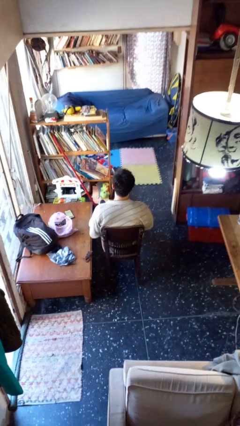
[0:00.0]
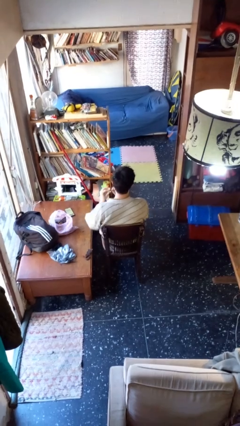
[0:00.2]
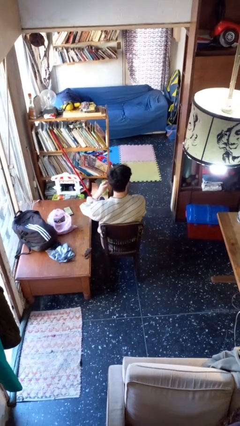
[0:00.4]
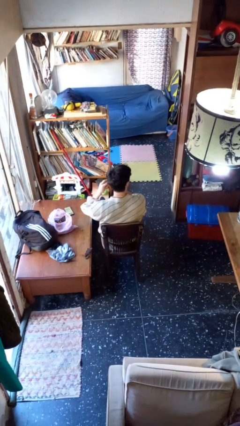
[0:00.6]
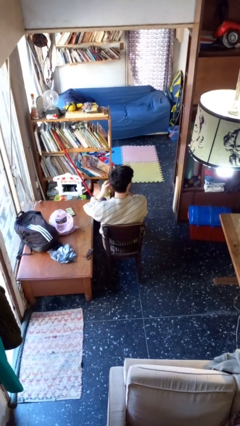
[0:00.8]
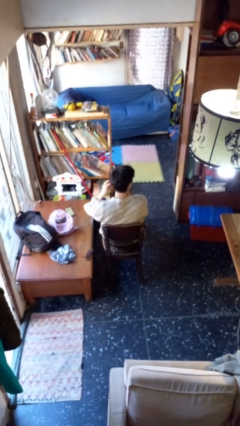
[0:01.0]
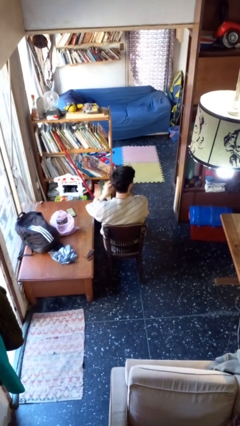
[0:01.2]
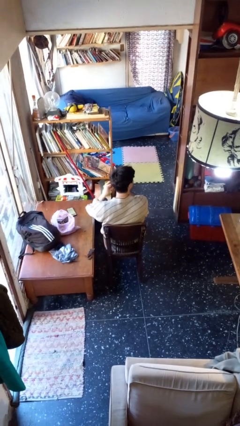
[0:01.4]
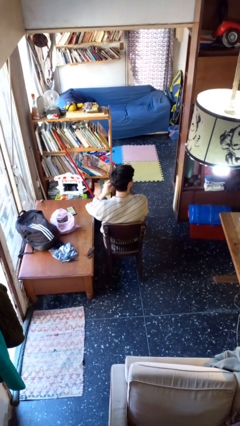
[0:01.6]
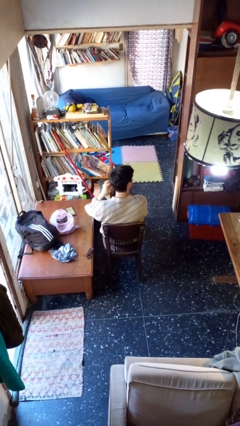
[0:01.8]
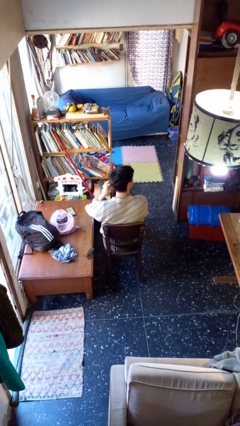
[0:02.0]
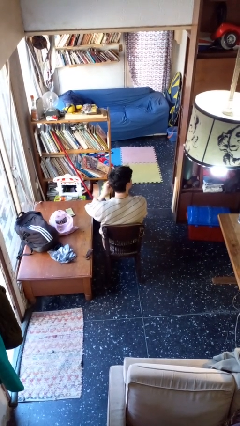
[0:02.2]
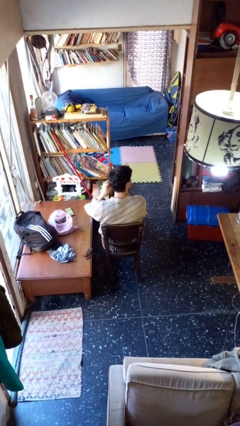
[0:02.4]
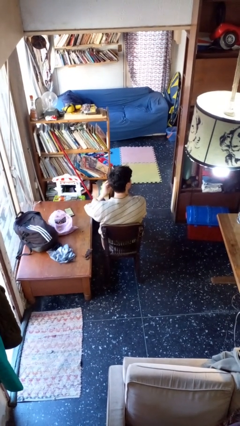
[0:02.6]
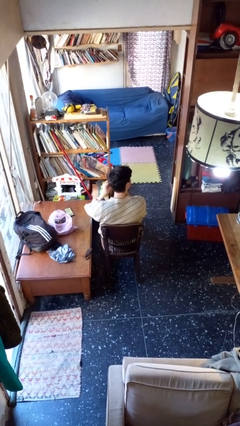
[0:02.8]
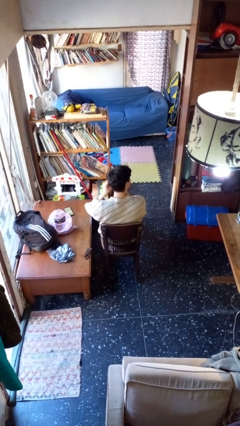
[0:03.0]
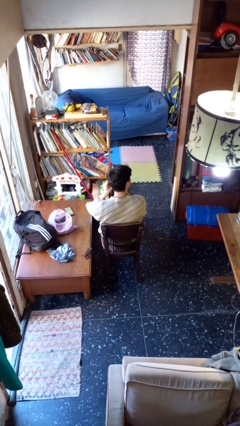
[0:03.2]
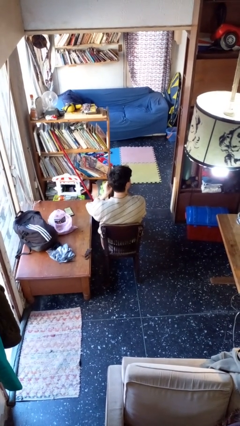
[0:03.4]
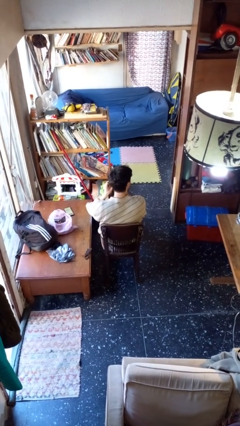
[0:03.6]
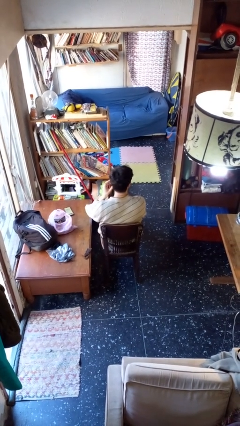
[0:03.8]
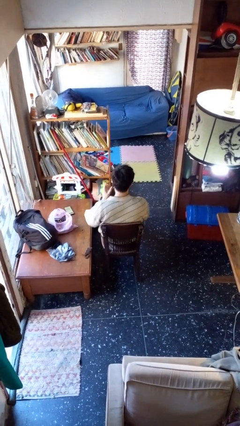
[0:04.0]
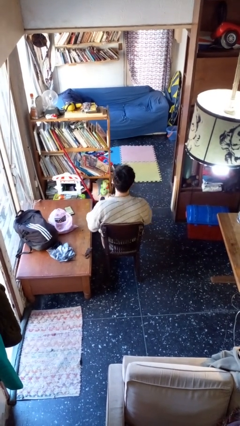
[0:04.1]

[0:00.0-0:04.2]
person puts on earrings

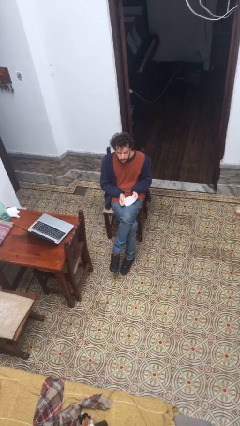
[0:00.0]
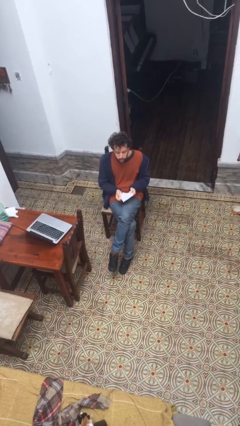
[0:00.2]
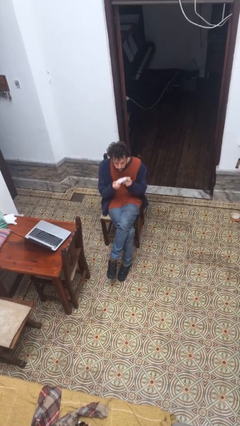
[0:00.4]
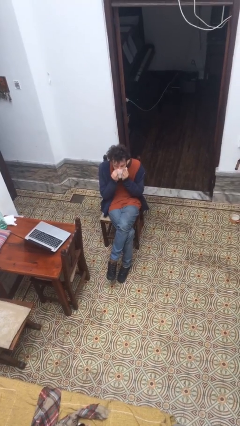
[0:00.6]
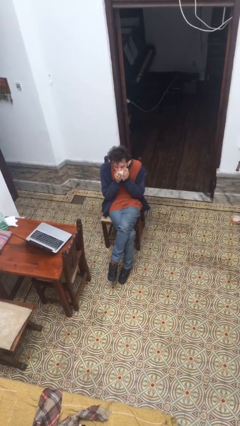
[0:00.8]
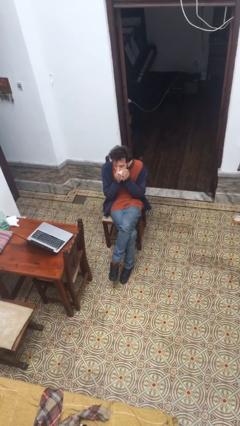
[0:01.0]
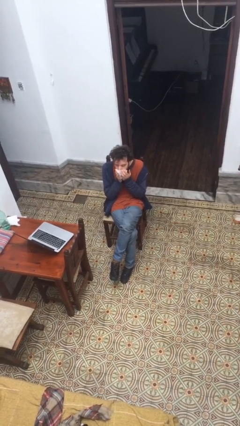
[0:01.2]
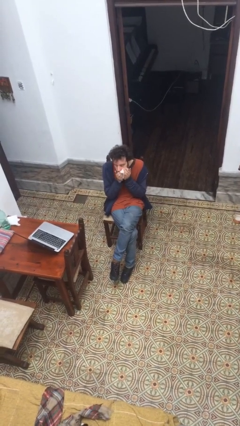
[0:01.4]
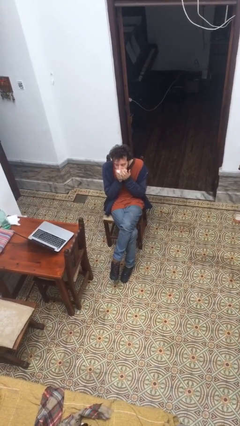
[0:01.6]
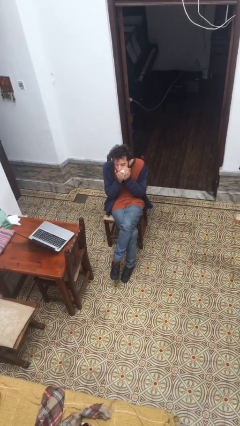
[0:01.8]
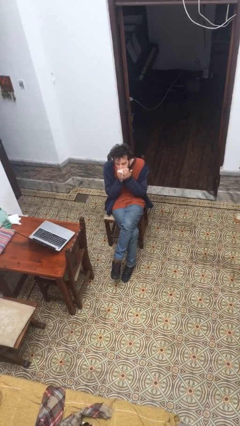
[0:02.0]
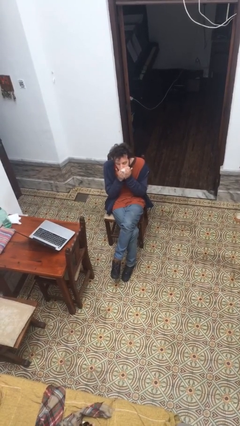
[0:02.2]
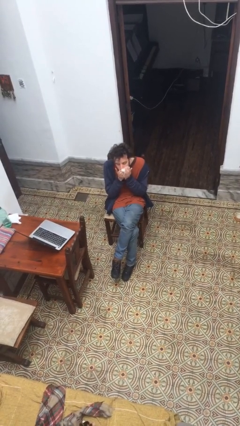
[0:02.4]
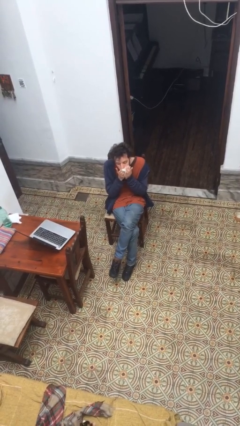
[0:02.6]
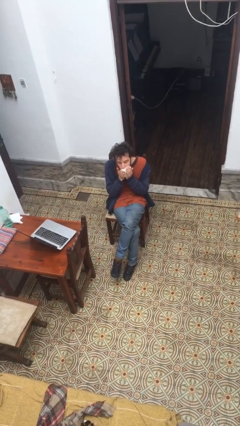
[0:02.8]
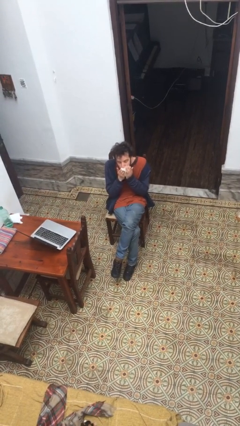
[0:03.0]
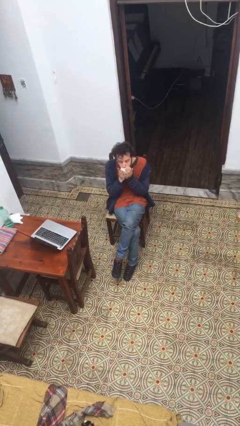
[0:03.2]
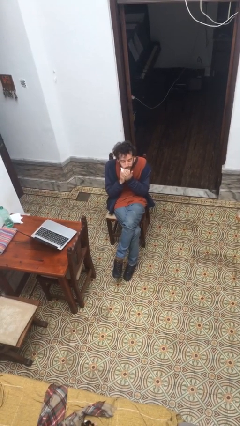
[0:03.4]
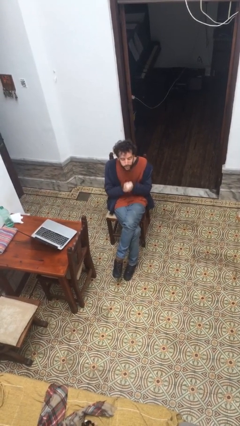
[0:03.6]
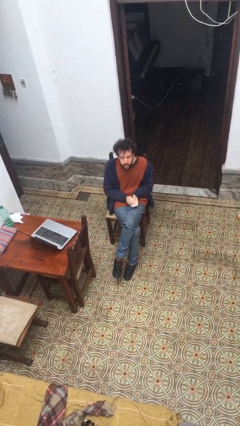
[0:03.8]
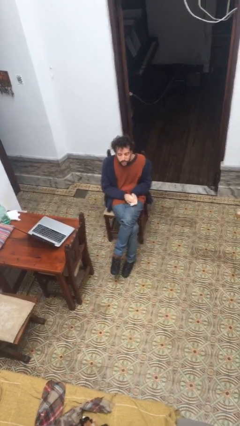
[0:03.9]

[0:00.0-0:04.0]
person wipes mouth with napkin

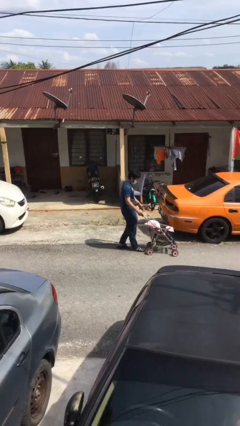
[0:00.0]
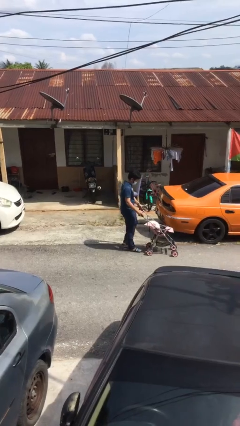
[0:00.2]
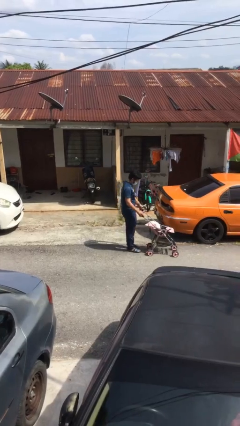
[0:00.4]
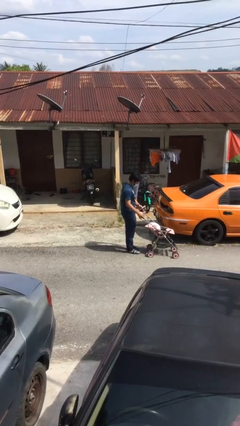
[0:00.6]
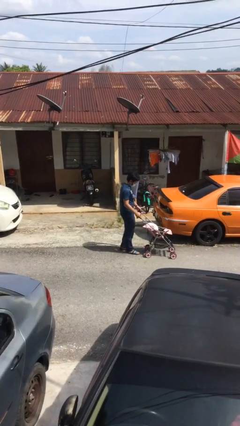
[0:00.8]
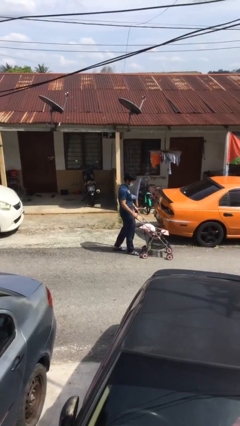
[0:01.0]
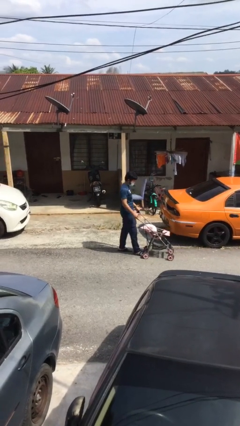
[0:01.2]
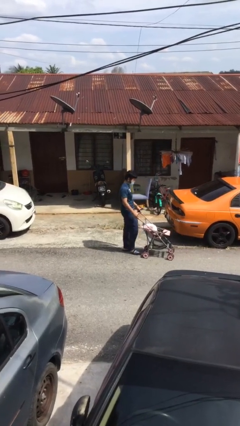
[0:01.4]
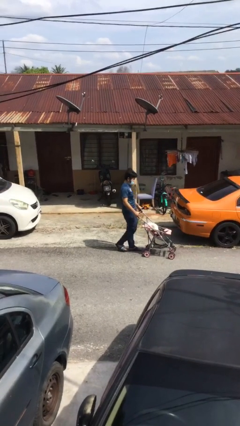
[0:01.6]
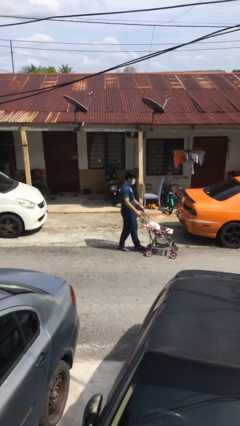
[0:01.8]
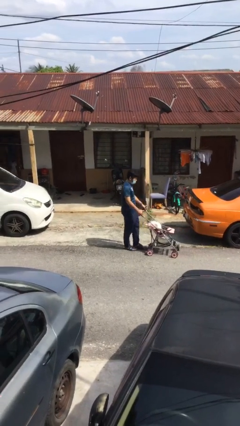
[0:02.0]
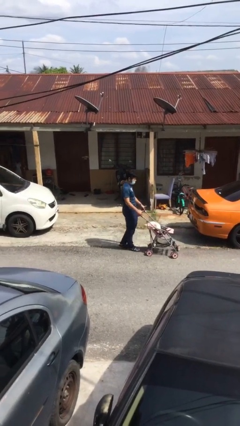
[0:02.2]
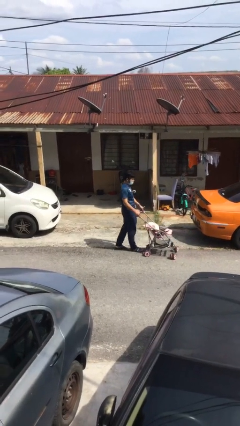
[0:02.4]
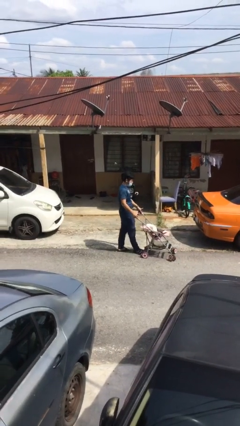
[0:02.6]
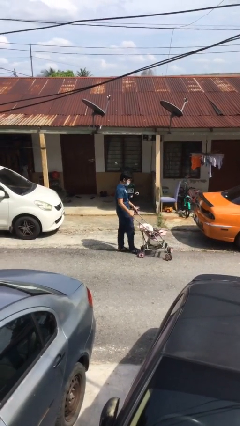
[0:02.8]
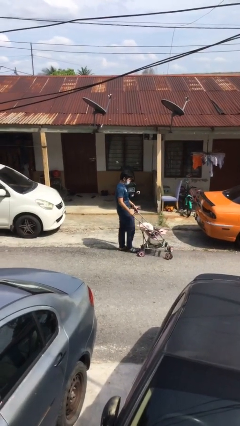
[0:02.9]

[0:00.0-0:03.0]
person pulls wheeled cart

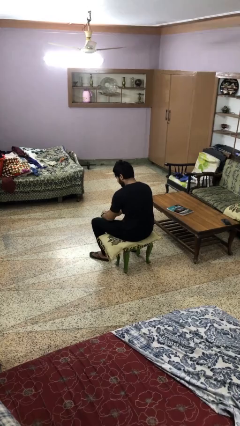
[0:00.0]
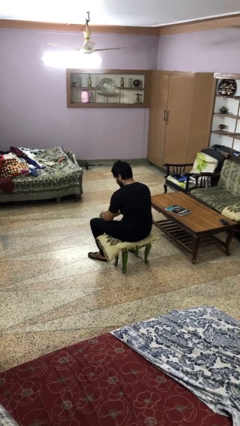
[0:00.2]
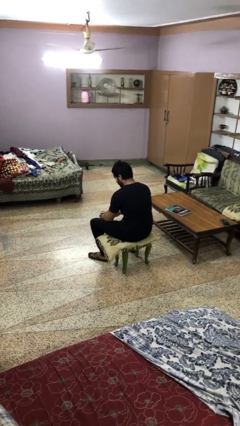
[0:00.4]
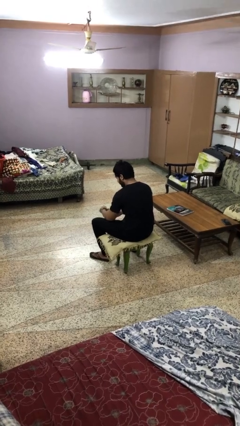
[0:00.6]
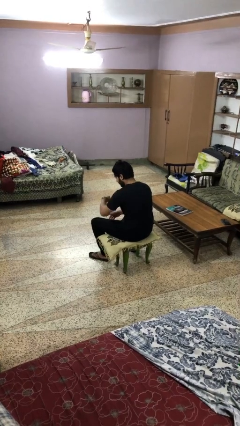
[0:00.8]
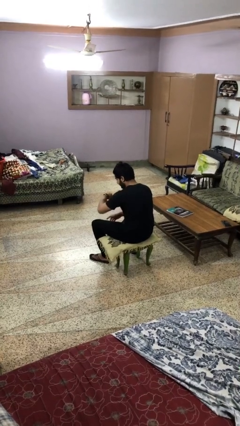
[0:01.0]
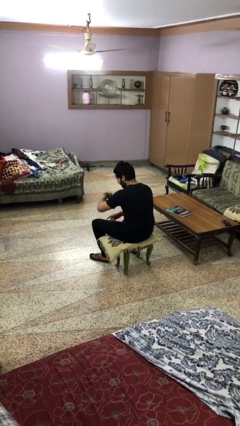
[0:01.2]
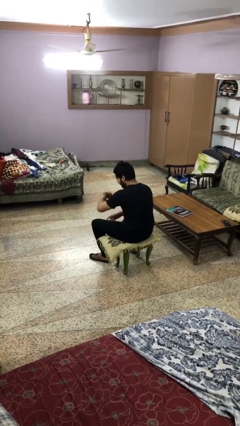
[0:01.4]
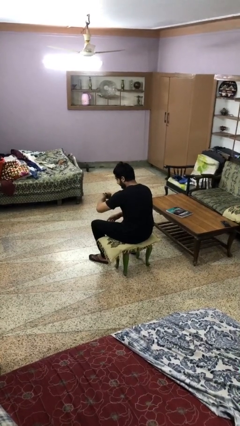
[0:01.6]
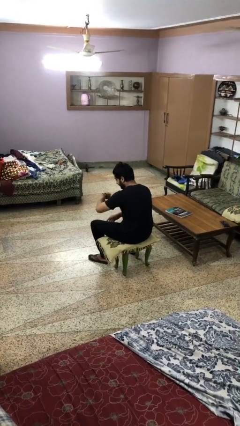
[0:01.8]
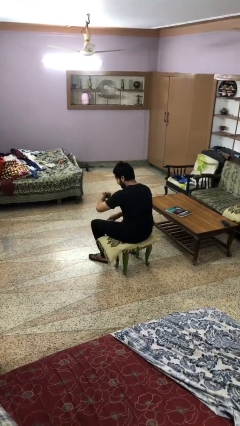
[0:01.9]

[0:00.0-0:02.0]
person looks at wristwatch

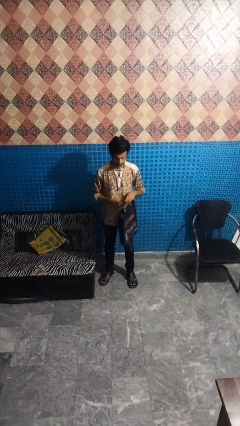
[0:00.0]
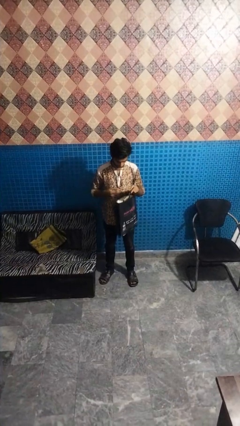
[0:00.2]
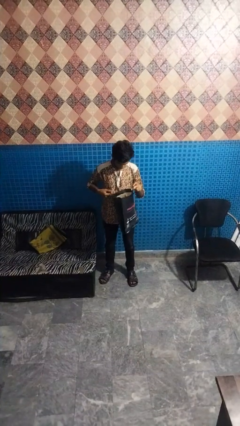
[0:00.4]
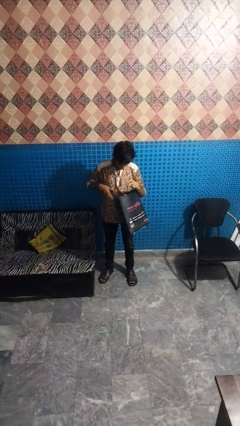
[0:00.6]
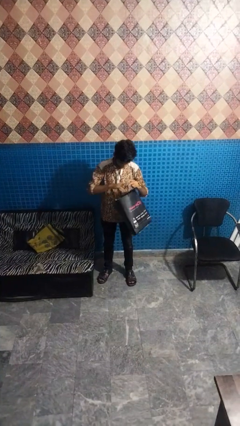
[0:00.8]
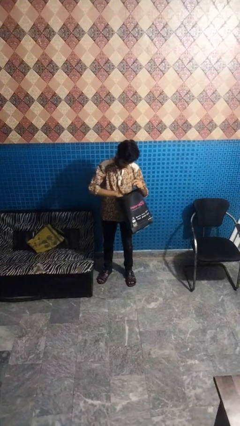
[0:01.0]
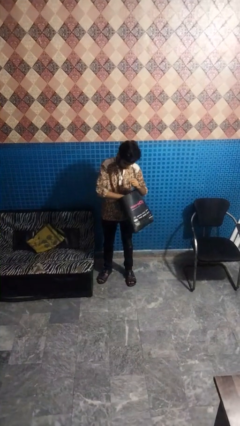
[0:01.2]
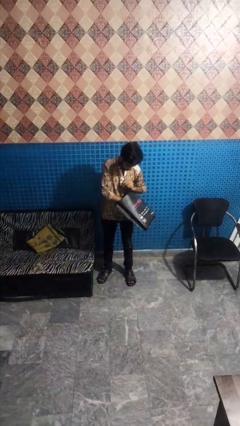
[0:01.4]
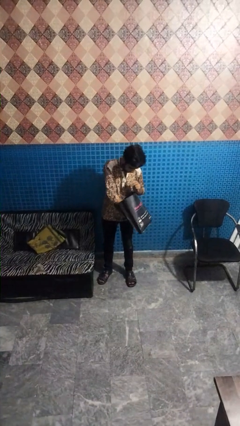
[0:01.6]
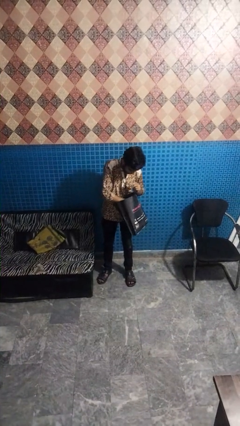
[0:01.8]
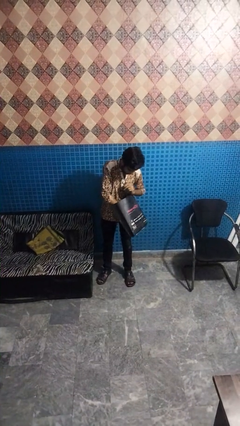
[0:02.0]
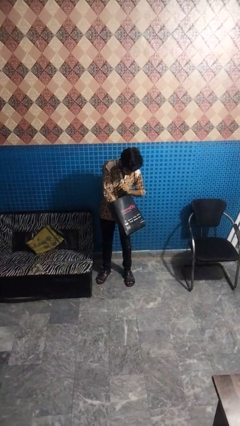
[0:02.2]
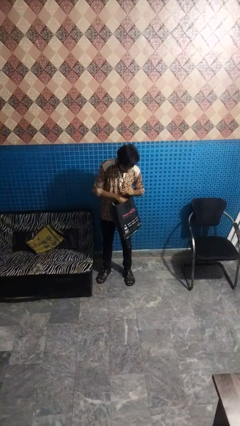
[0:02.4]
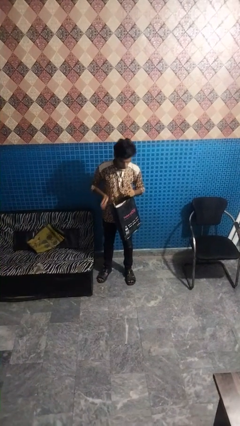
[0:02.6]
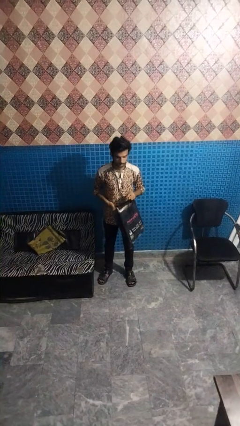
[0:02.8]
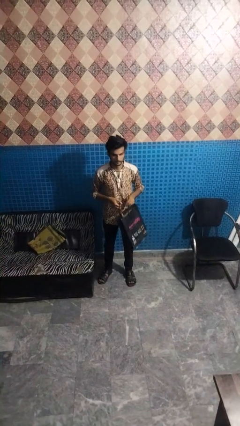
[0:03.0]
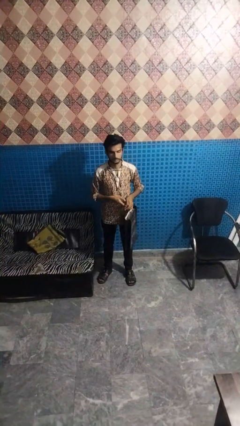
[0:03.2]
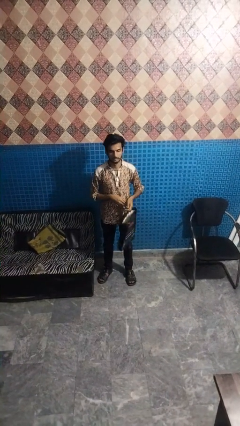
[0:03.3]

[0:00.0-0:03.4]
person searches in bag

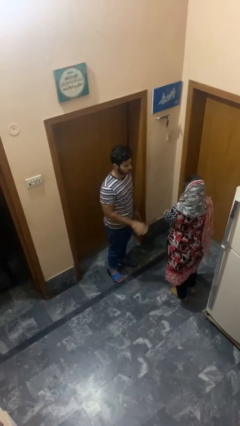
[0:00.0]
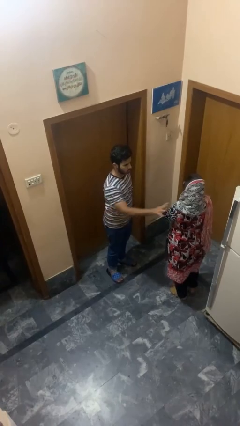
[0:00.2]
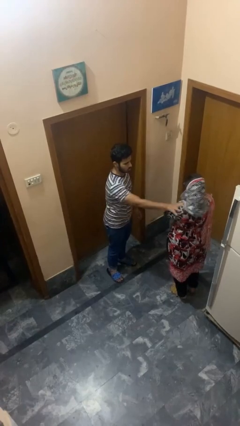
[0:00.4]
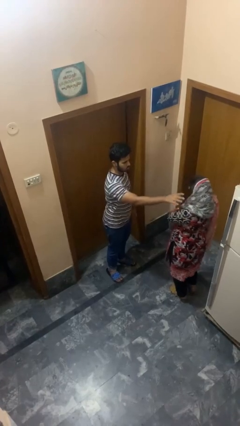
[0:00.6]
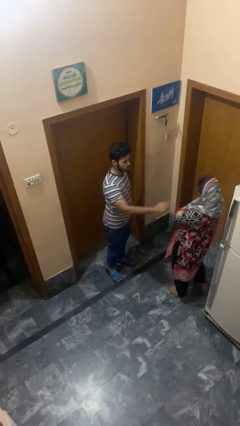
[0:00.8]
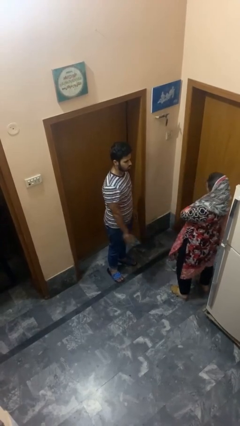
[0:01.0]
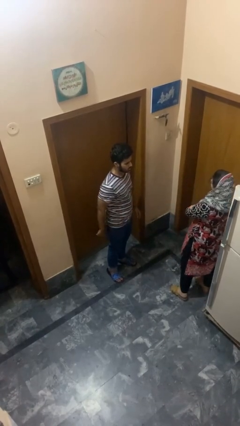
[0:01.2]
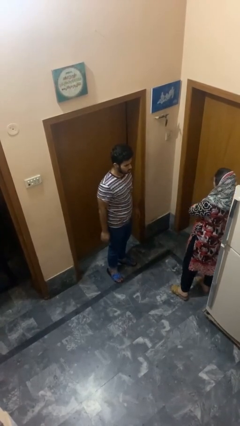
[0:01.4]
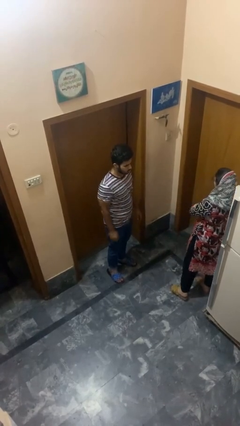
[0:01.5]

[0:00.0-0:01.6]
person shoves person
